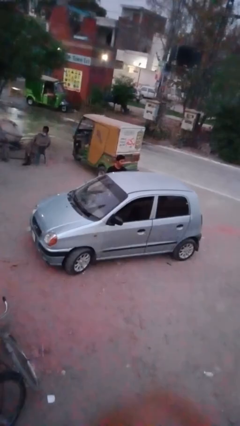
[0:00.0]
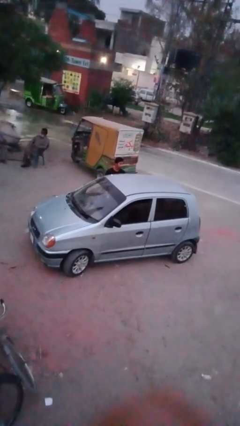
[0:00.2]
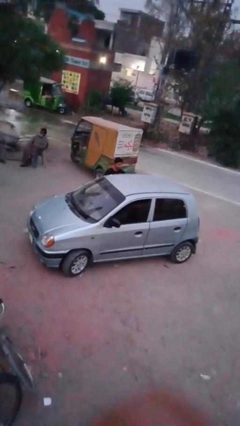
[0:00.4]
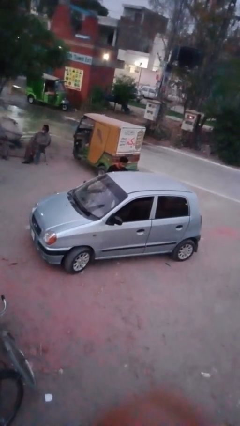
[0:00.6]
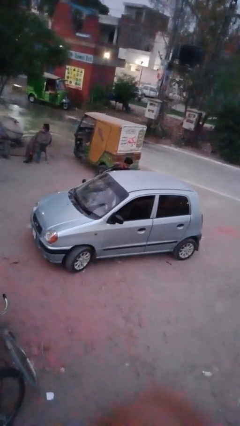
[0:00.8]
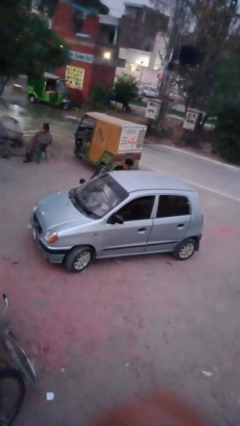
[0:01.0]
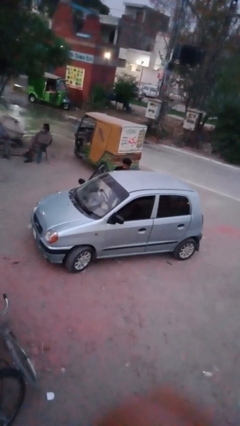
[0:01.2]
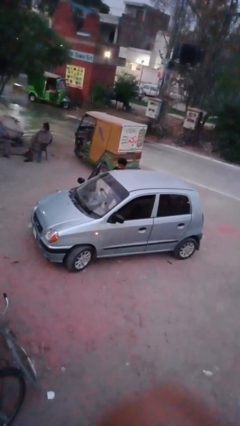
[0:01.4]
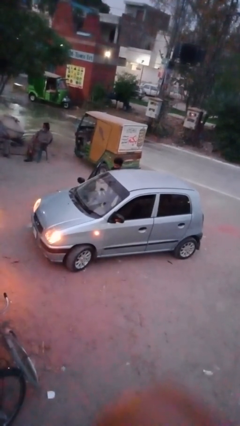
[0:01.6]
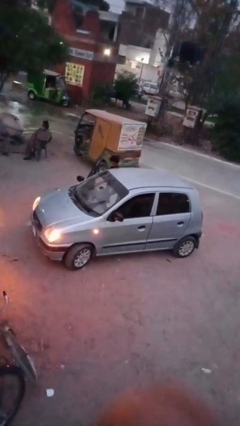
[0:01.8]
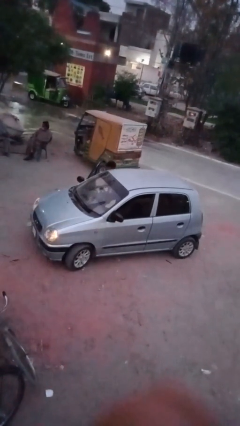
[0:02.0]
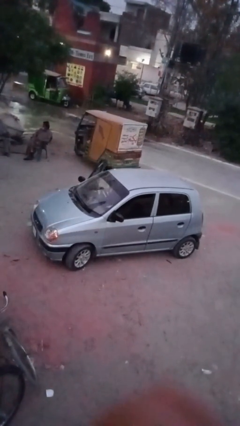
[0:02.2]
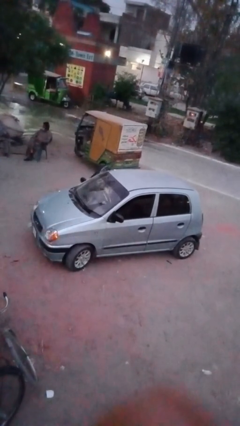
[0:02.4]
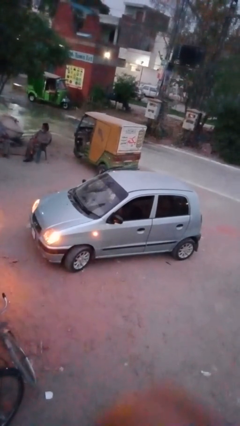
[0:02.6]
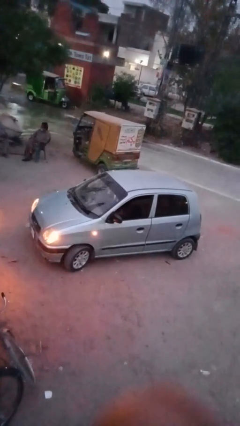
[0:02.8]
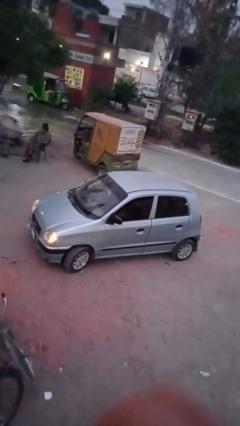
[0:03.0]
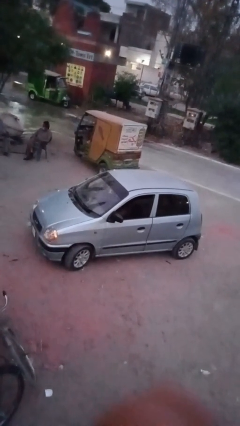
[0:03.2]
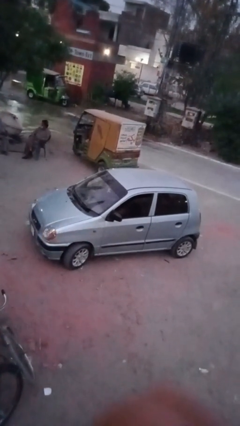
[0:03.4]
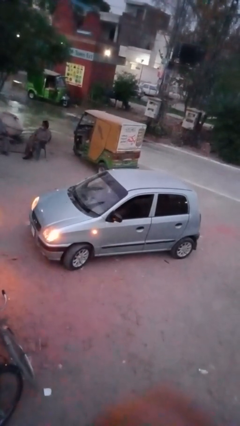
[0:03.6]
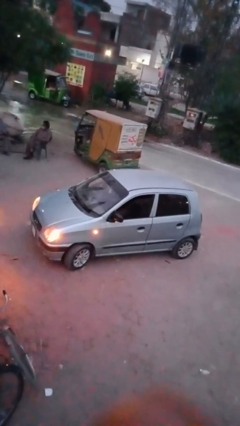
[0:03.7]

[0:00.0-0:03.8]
car picks up person

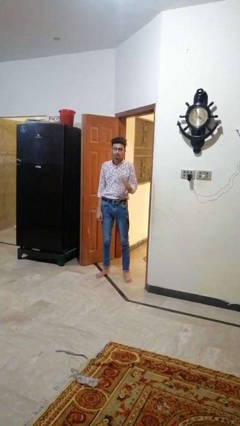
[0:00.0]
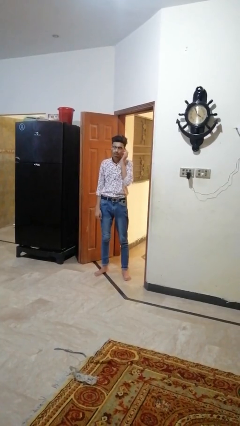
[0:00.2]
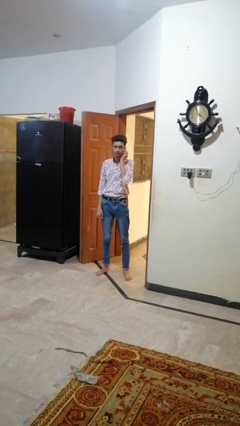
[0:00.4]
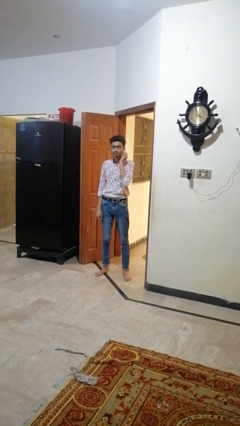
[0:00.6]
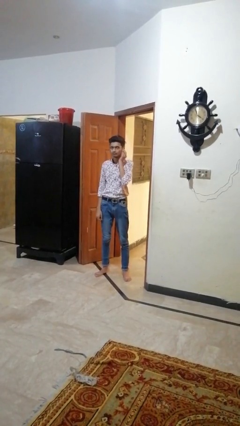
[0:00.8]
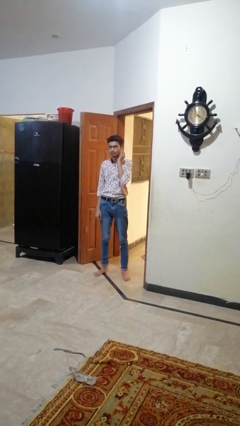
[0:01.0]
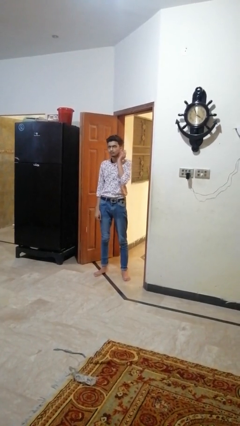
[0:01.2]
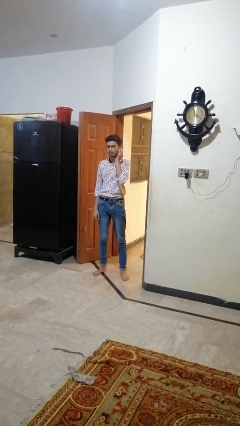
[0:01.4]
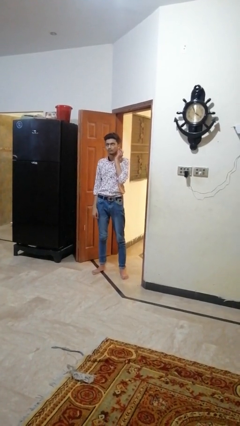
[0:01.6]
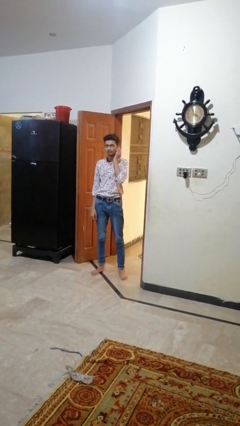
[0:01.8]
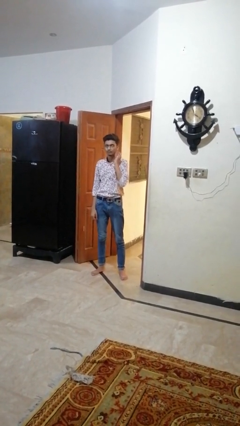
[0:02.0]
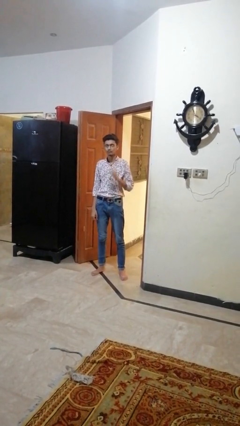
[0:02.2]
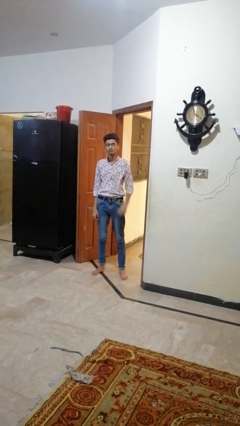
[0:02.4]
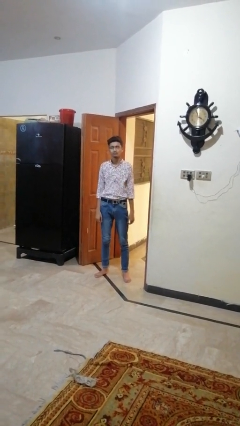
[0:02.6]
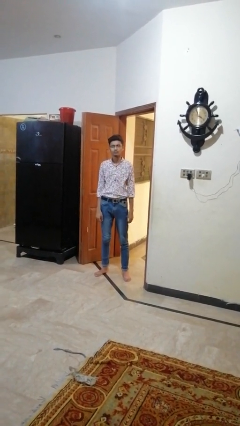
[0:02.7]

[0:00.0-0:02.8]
person touches earlobe

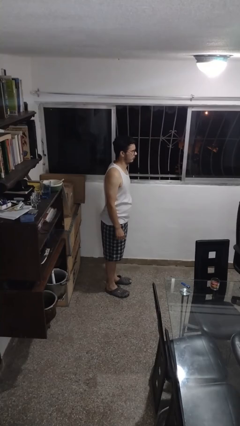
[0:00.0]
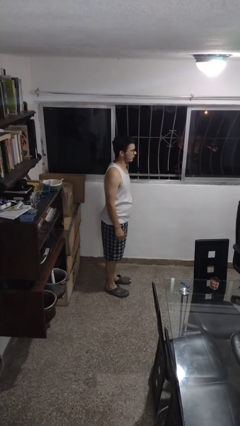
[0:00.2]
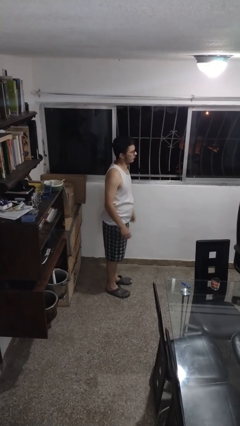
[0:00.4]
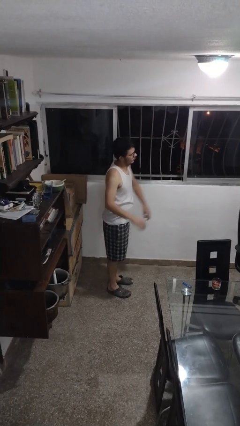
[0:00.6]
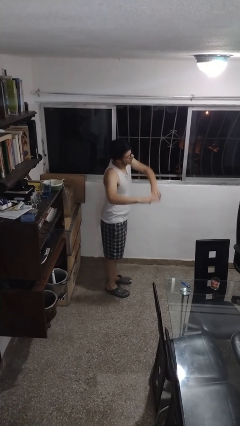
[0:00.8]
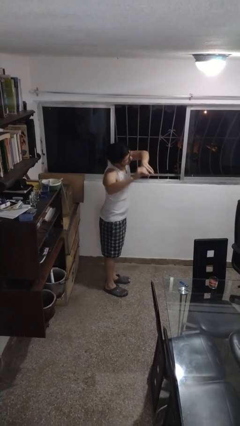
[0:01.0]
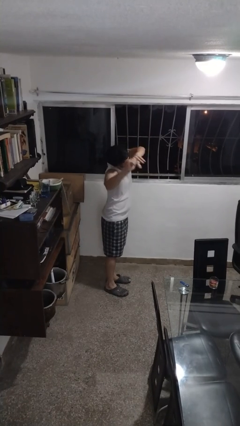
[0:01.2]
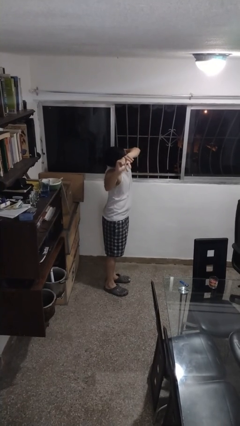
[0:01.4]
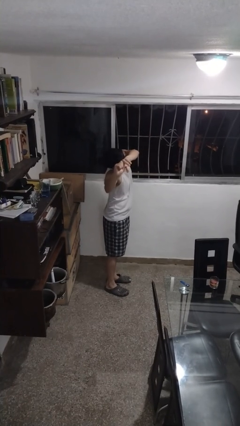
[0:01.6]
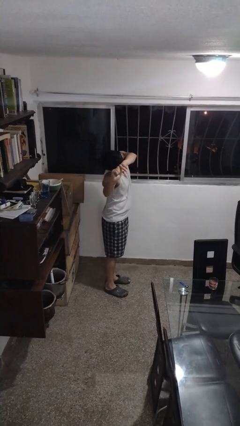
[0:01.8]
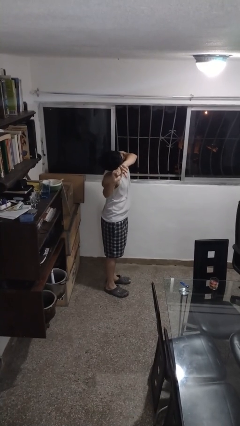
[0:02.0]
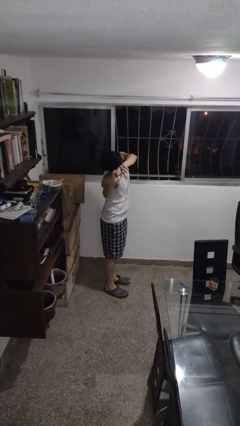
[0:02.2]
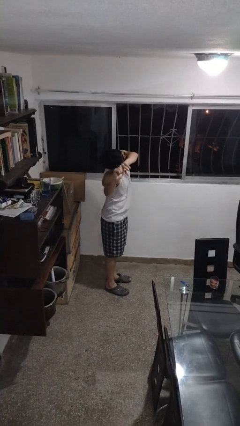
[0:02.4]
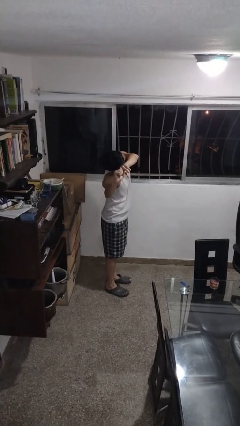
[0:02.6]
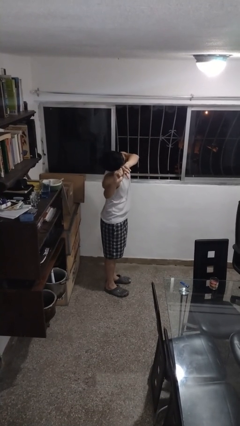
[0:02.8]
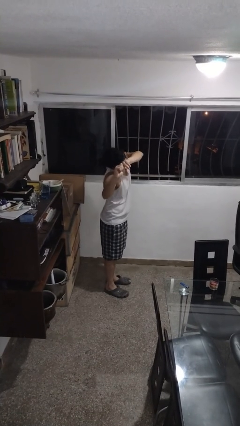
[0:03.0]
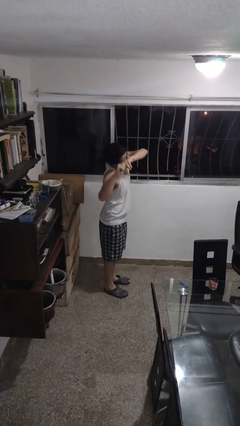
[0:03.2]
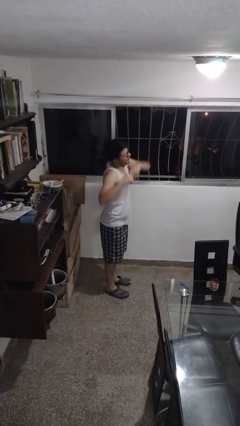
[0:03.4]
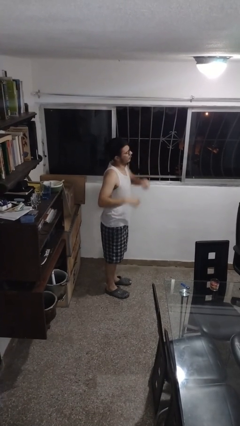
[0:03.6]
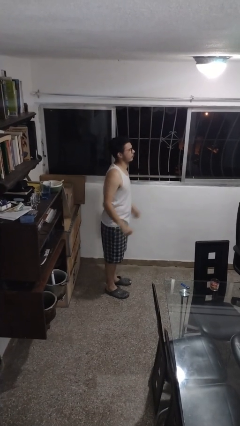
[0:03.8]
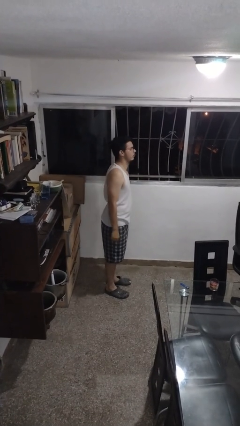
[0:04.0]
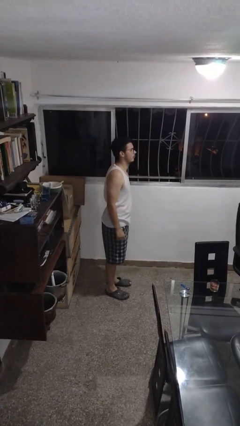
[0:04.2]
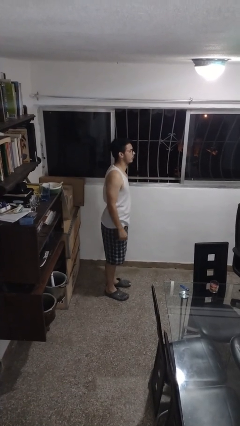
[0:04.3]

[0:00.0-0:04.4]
person stretches arms to side

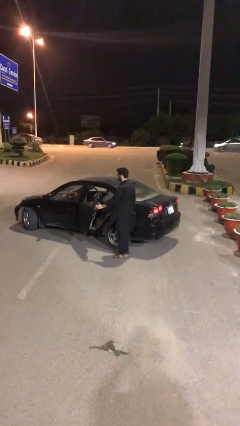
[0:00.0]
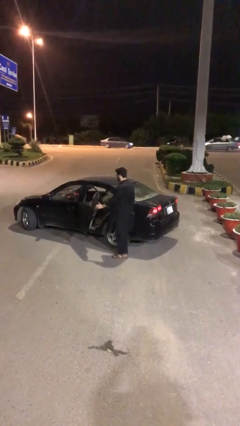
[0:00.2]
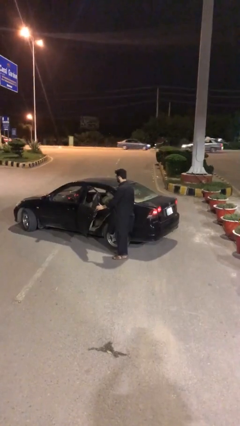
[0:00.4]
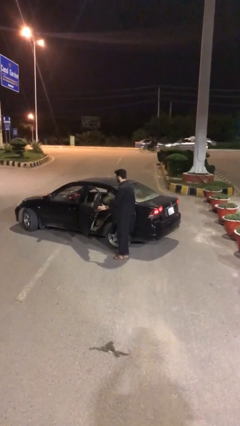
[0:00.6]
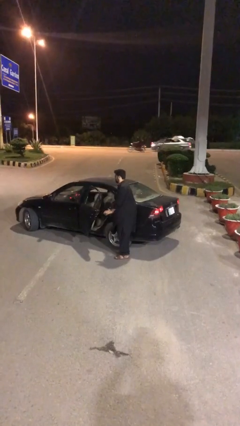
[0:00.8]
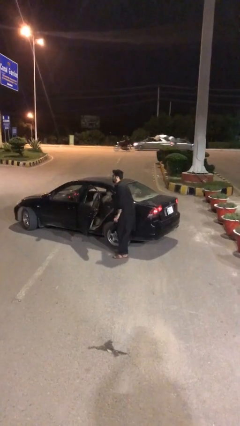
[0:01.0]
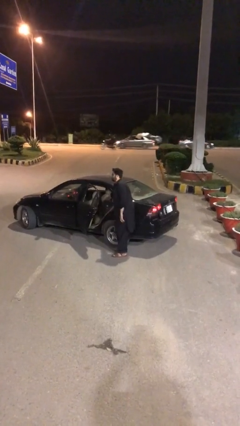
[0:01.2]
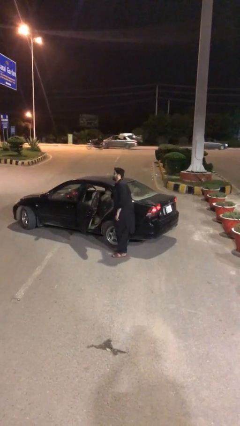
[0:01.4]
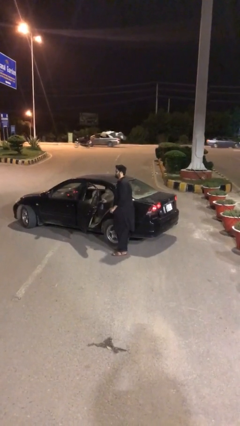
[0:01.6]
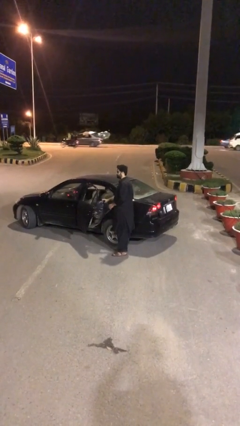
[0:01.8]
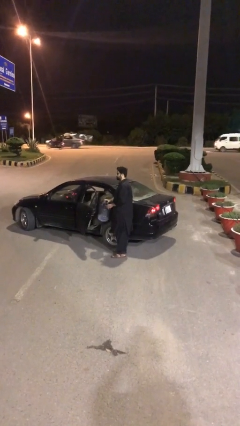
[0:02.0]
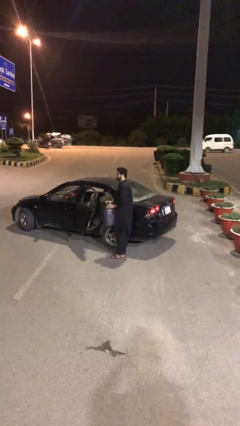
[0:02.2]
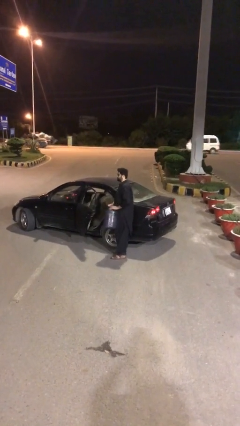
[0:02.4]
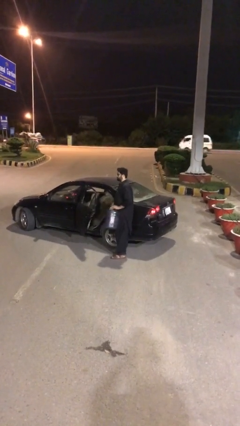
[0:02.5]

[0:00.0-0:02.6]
person unloads car

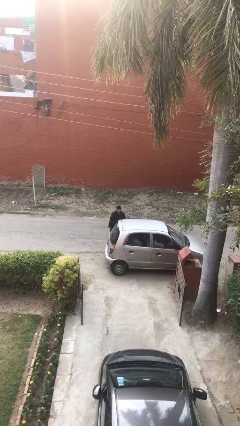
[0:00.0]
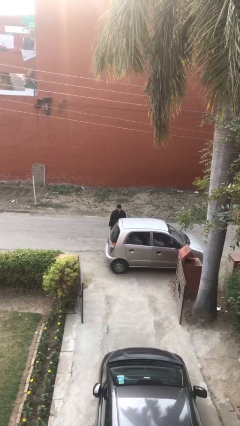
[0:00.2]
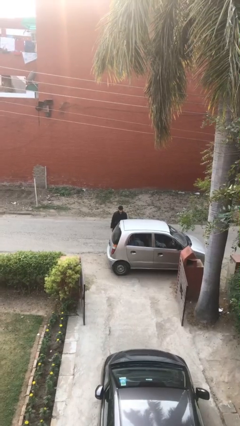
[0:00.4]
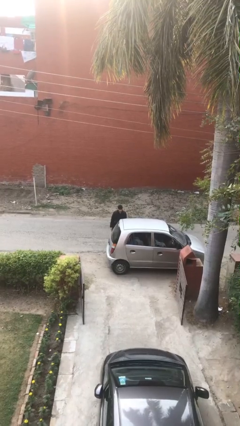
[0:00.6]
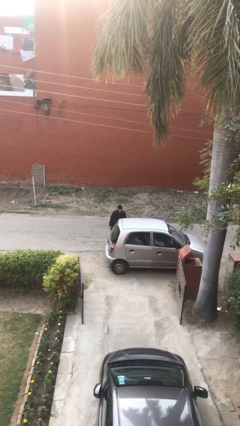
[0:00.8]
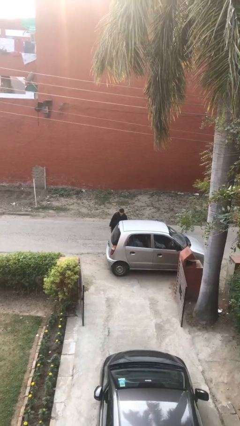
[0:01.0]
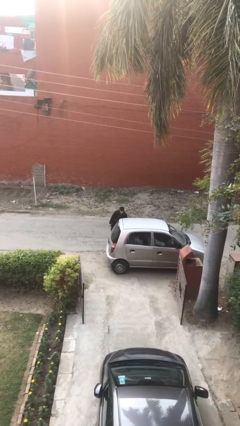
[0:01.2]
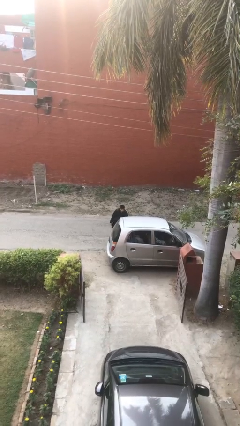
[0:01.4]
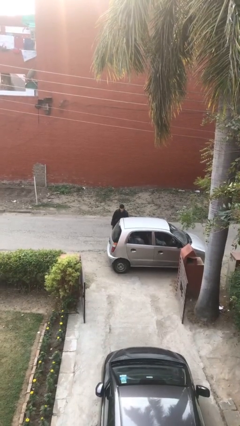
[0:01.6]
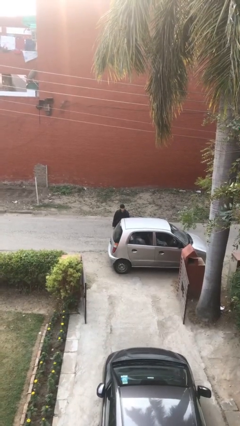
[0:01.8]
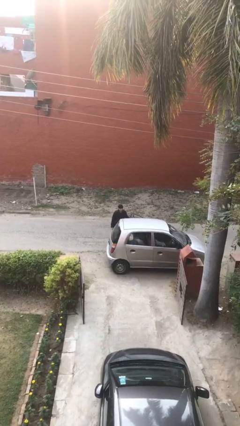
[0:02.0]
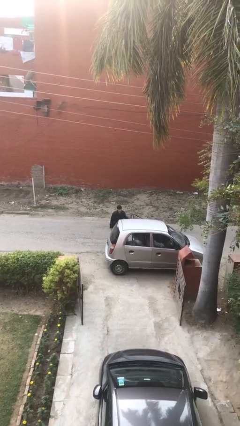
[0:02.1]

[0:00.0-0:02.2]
person opens car door

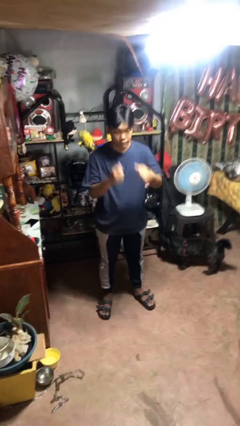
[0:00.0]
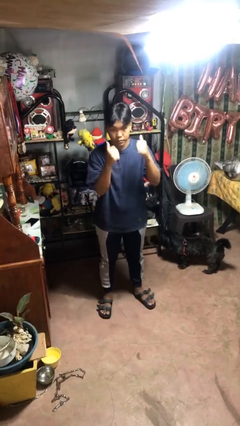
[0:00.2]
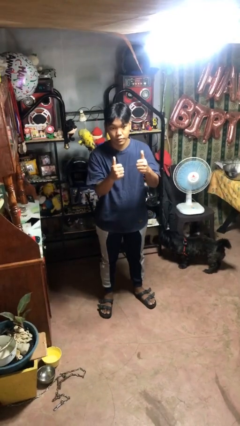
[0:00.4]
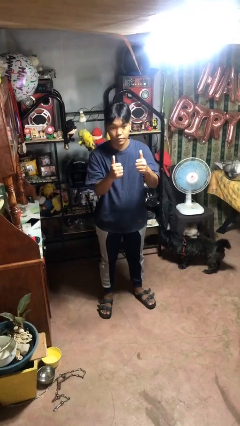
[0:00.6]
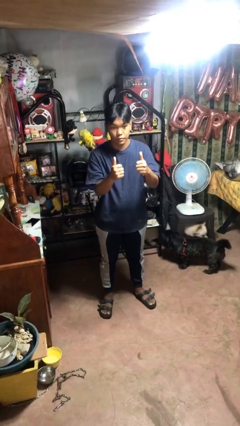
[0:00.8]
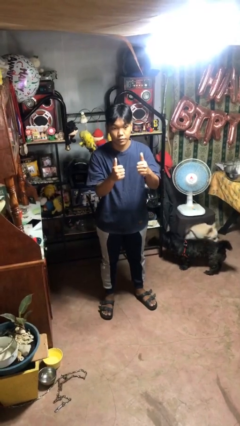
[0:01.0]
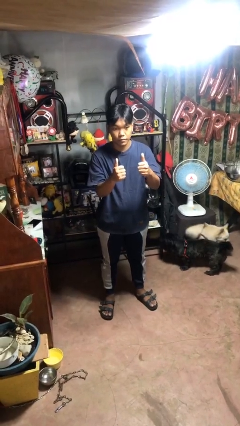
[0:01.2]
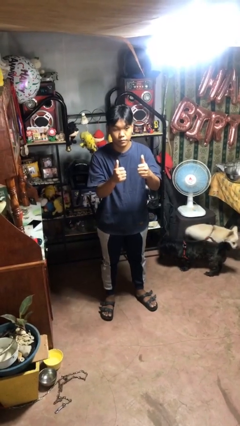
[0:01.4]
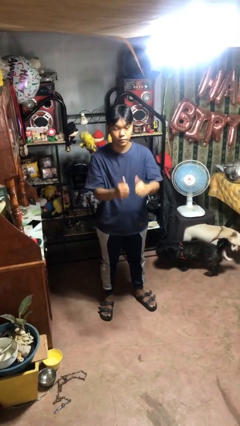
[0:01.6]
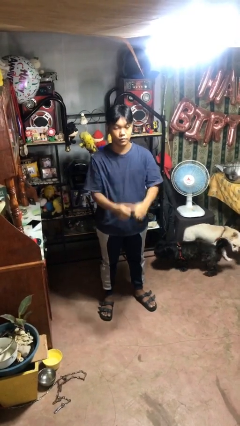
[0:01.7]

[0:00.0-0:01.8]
person gestures thumbs up
